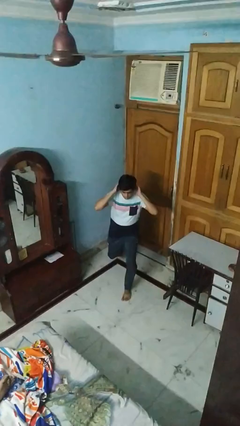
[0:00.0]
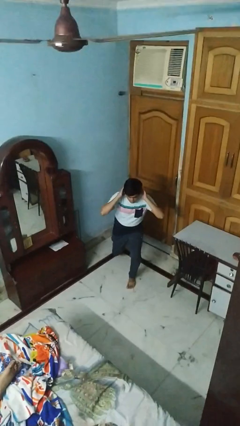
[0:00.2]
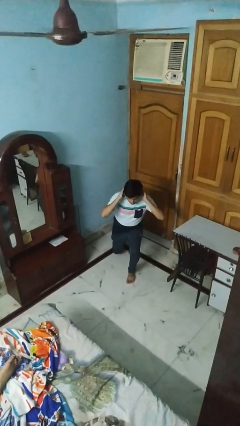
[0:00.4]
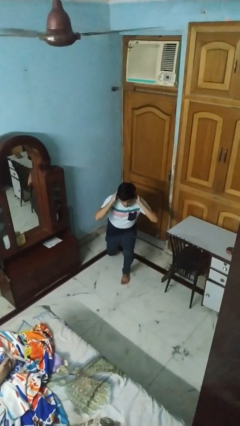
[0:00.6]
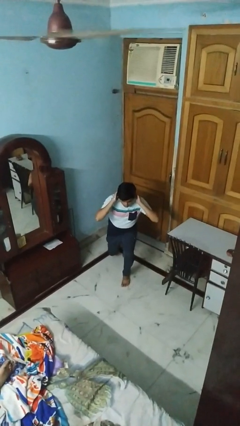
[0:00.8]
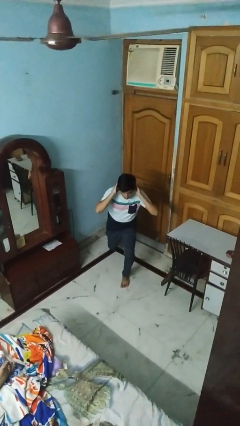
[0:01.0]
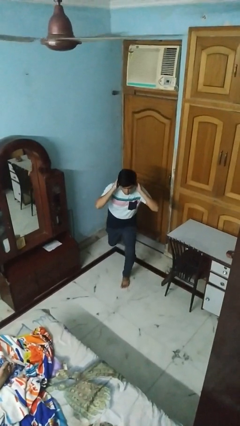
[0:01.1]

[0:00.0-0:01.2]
person exercises with lunges

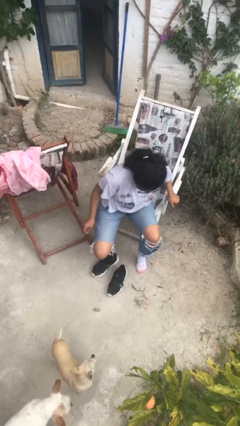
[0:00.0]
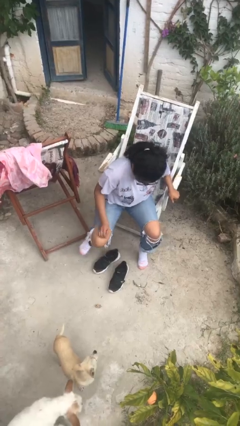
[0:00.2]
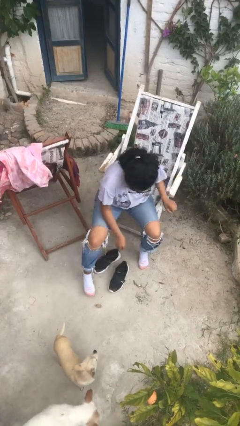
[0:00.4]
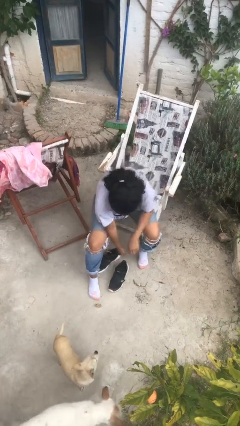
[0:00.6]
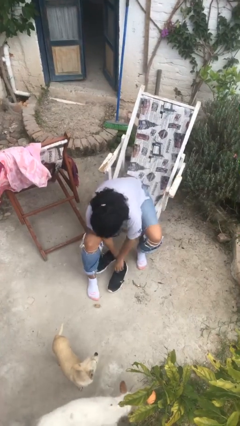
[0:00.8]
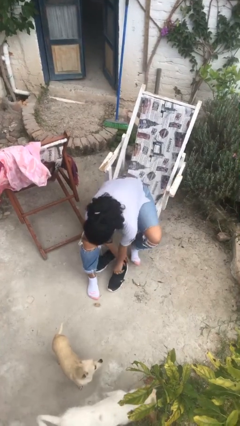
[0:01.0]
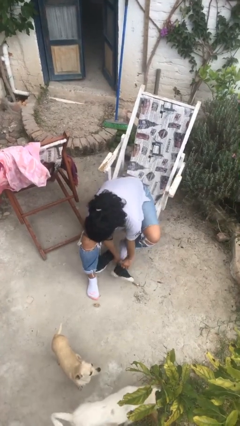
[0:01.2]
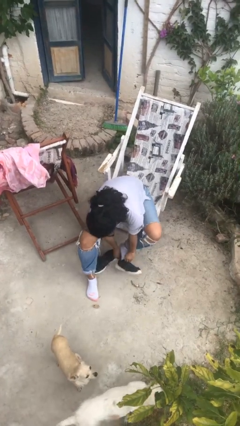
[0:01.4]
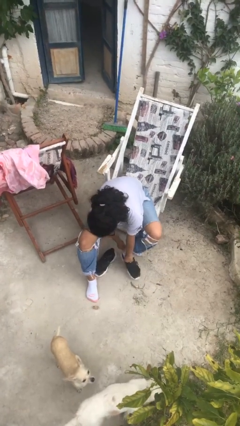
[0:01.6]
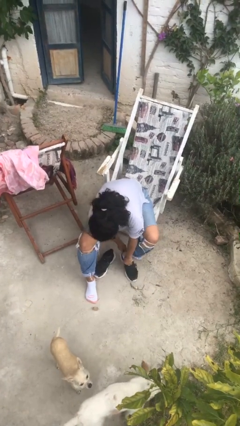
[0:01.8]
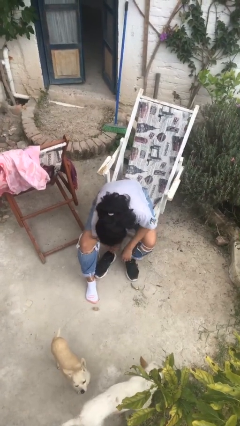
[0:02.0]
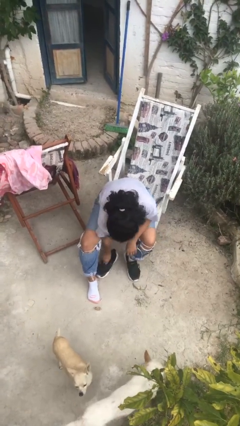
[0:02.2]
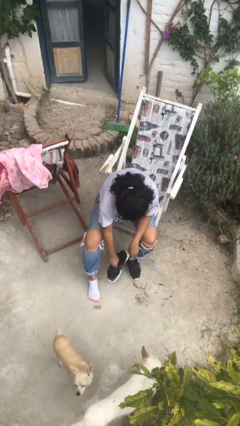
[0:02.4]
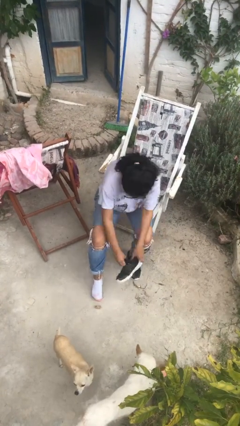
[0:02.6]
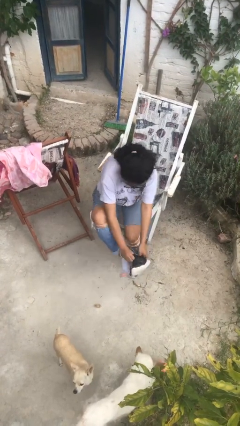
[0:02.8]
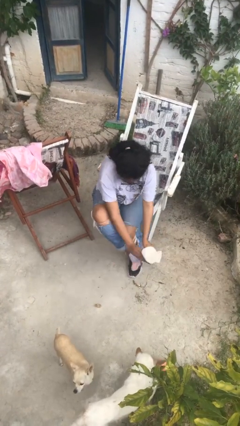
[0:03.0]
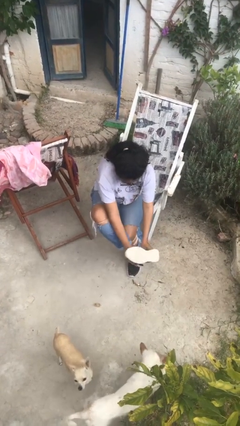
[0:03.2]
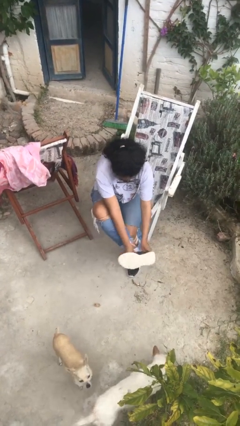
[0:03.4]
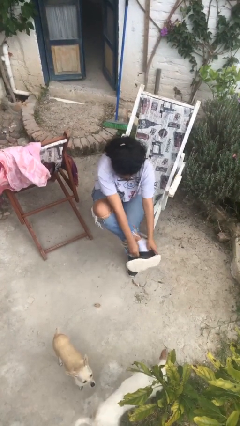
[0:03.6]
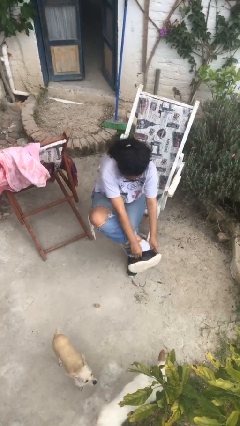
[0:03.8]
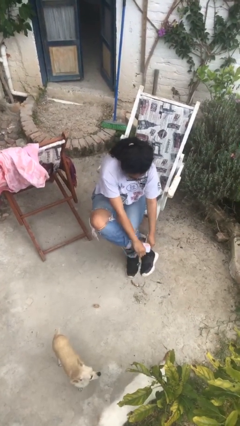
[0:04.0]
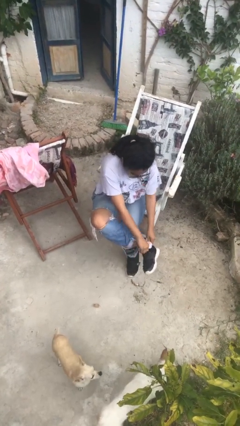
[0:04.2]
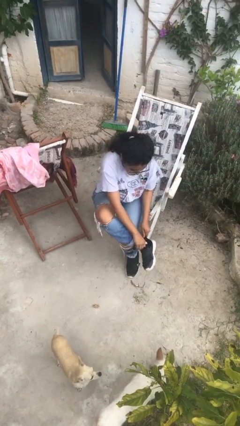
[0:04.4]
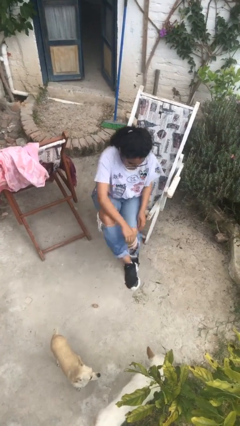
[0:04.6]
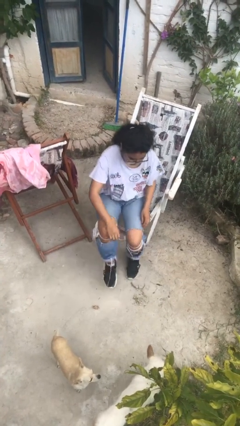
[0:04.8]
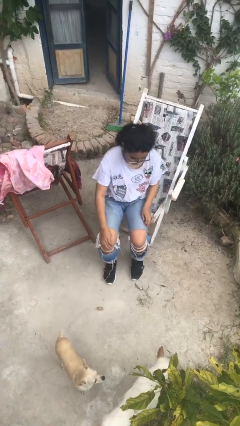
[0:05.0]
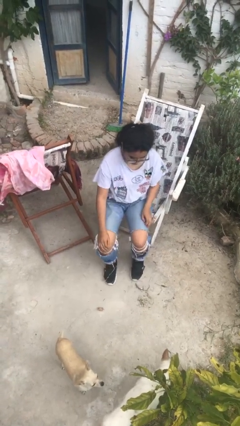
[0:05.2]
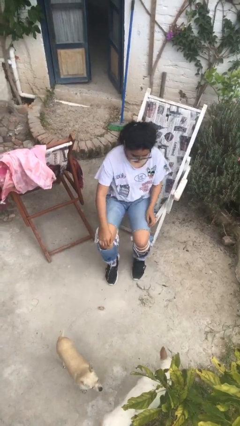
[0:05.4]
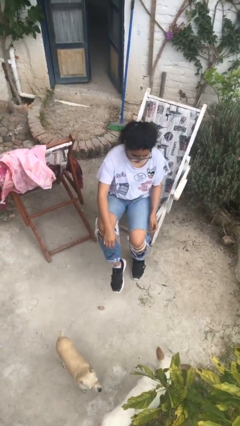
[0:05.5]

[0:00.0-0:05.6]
person puts on shoes

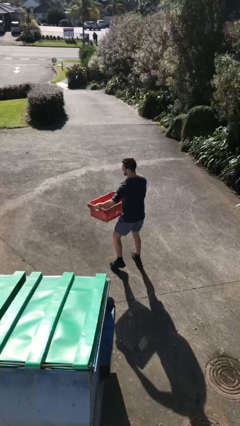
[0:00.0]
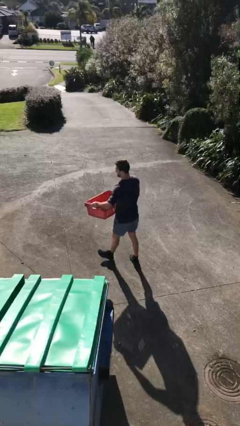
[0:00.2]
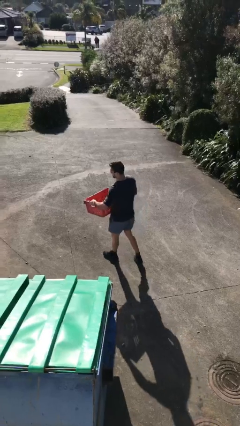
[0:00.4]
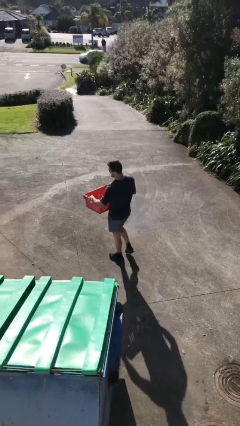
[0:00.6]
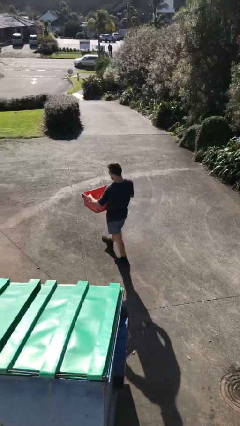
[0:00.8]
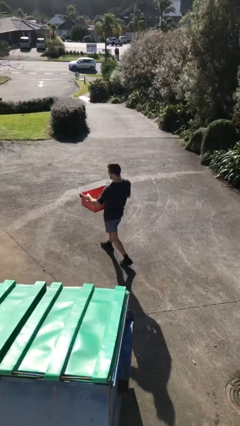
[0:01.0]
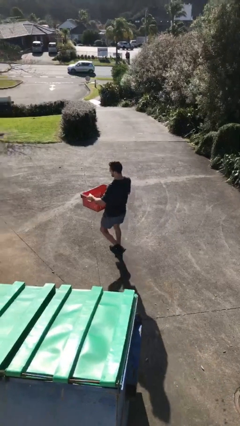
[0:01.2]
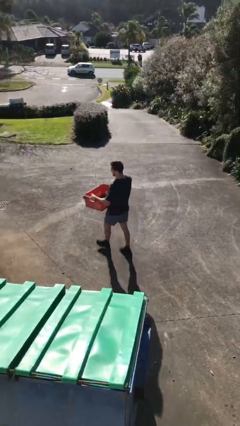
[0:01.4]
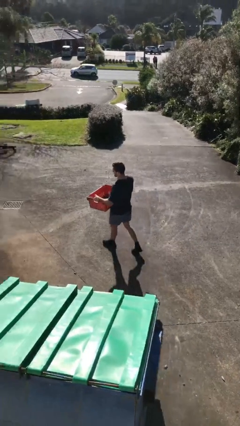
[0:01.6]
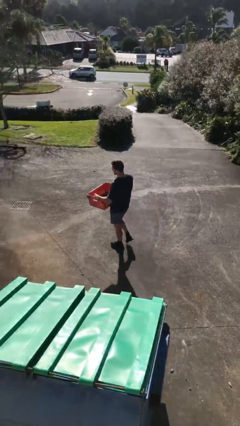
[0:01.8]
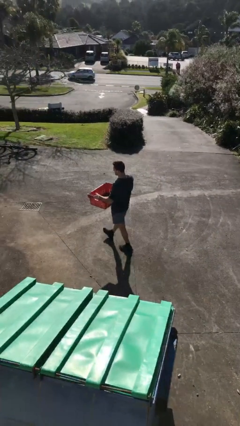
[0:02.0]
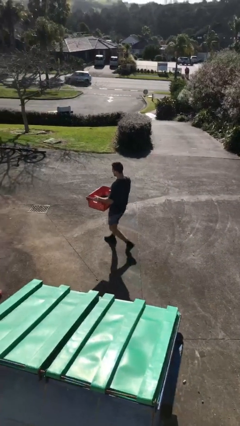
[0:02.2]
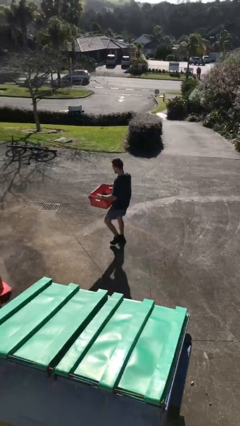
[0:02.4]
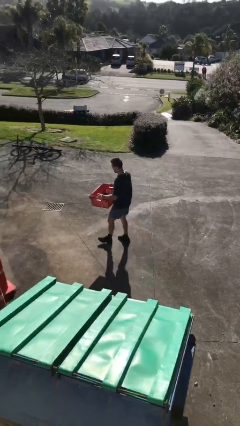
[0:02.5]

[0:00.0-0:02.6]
person carries heavy object

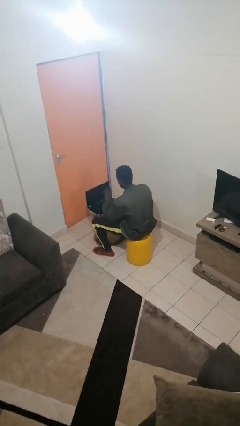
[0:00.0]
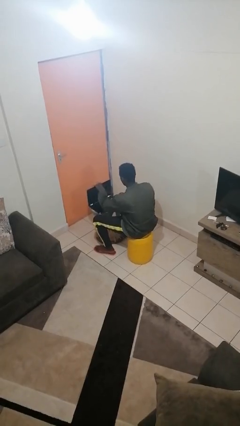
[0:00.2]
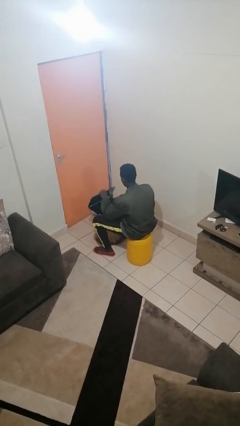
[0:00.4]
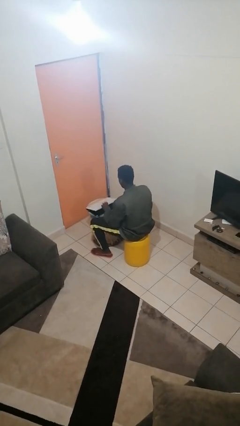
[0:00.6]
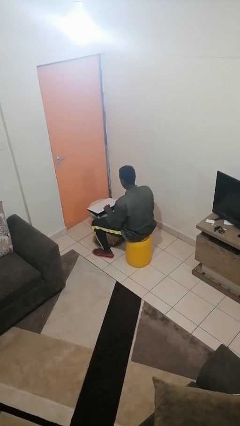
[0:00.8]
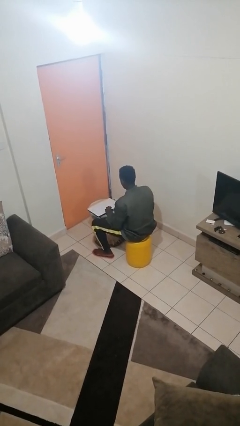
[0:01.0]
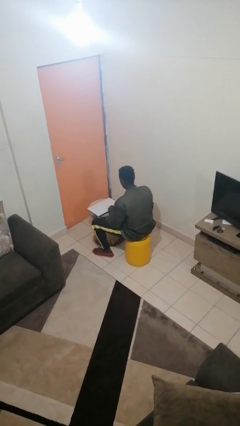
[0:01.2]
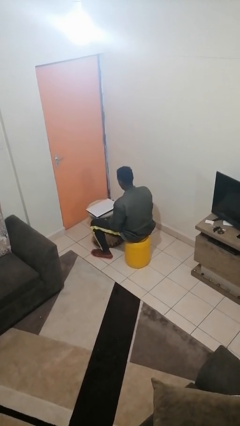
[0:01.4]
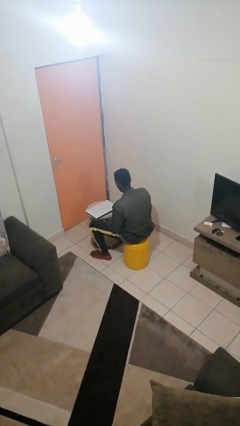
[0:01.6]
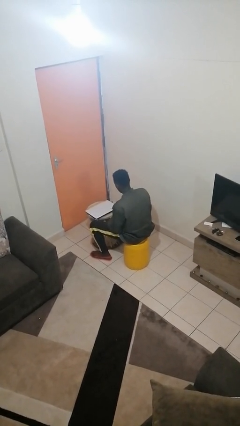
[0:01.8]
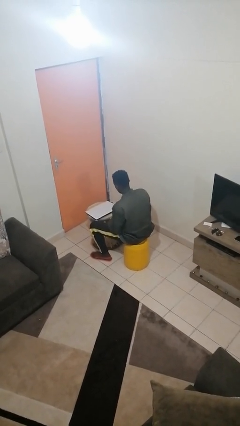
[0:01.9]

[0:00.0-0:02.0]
person closes laptop

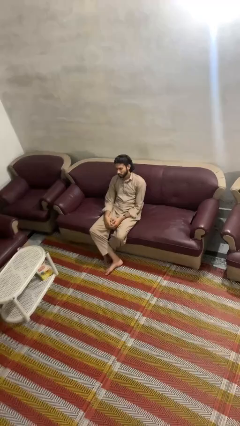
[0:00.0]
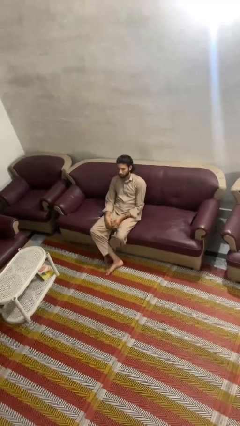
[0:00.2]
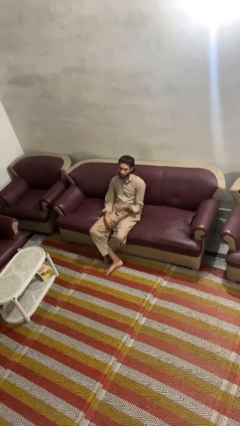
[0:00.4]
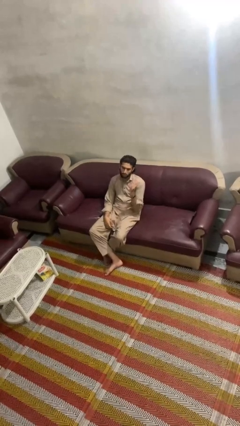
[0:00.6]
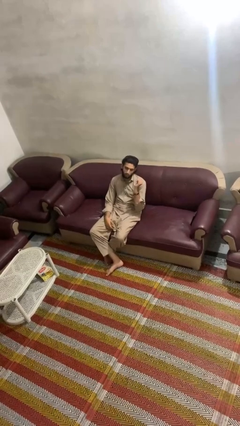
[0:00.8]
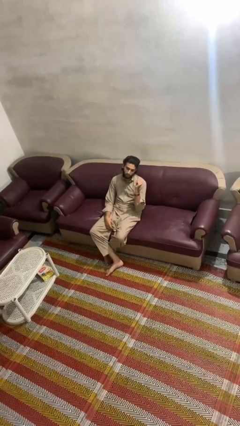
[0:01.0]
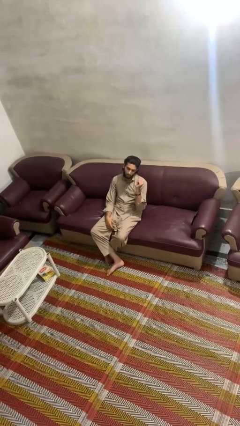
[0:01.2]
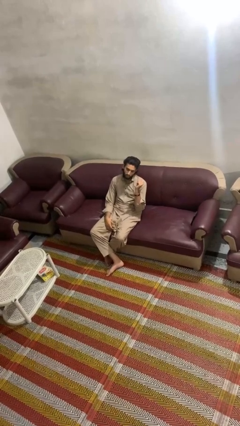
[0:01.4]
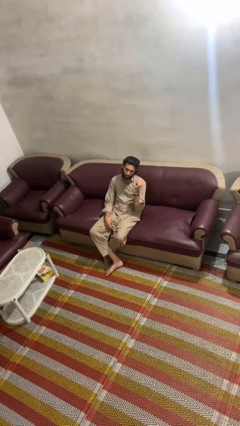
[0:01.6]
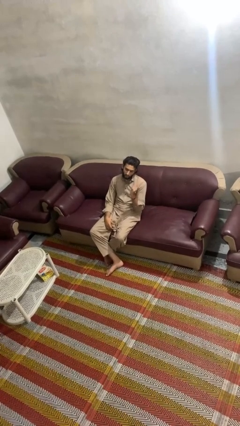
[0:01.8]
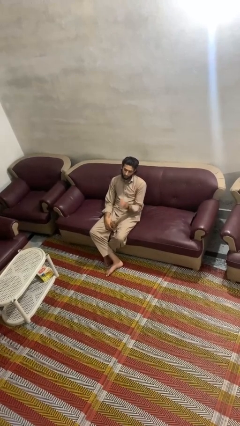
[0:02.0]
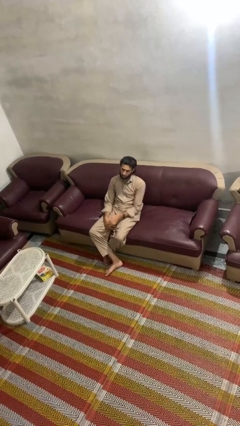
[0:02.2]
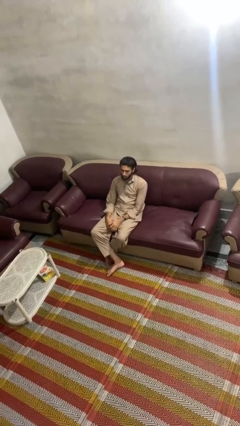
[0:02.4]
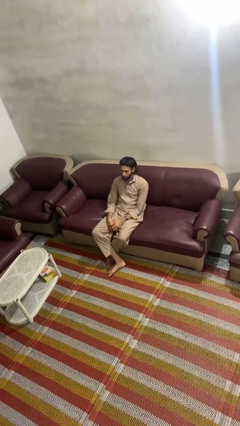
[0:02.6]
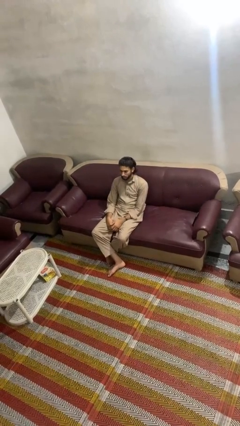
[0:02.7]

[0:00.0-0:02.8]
person gestures behind me

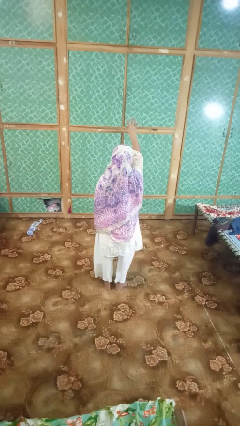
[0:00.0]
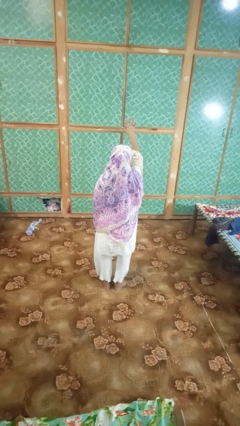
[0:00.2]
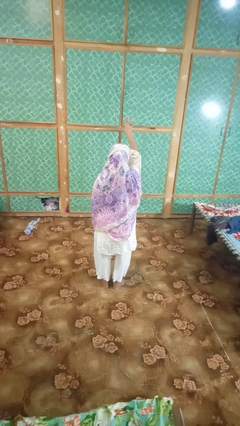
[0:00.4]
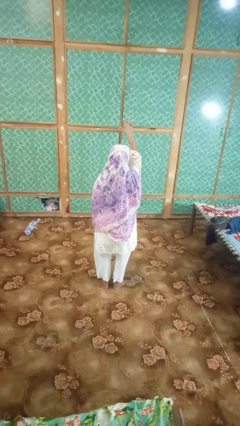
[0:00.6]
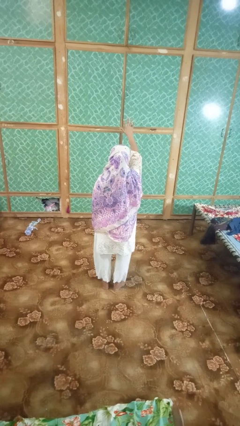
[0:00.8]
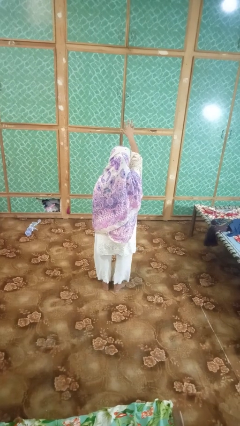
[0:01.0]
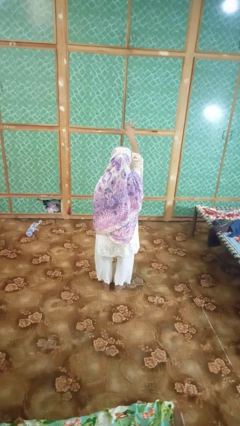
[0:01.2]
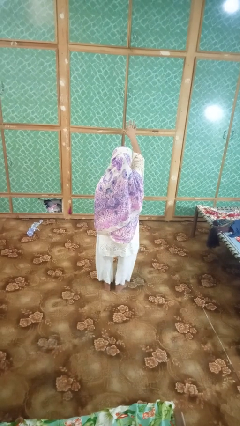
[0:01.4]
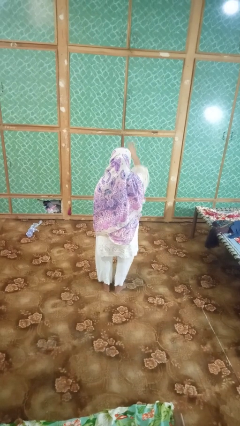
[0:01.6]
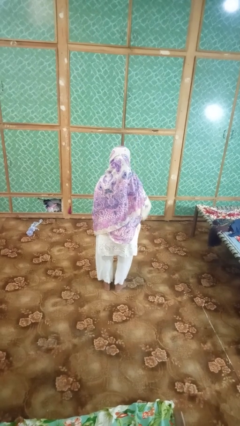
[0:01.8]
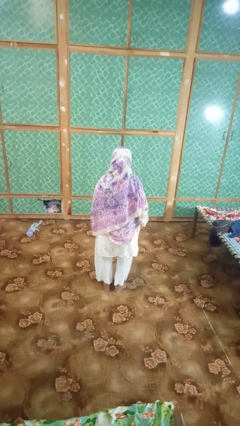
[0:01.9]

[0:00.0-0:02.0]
person gestures number five

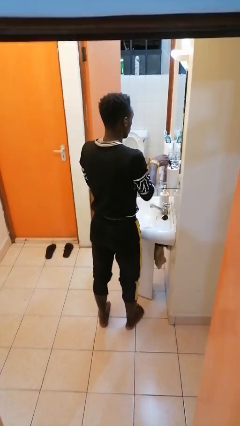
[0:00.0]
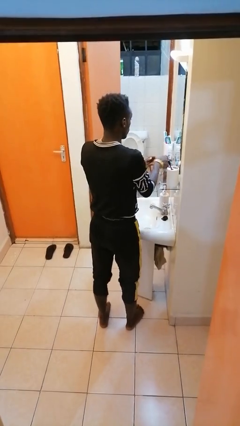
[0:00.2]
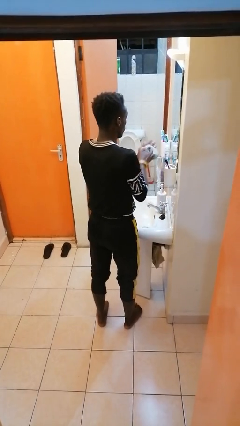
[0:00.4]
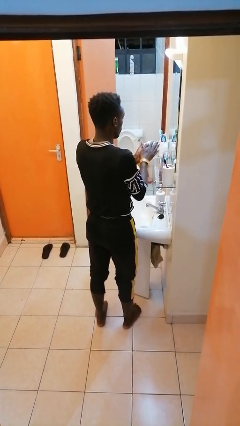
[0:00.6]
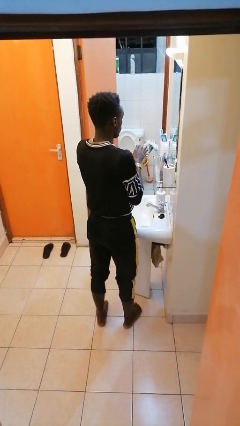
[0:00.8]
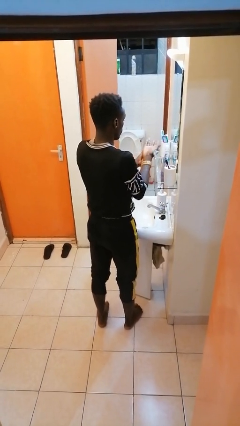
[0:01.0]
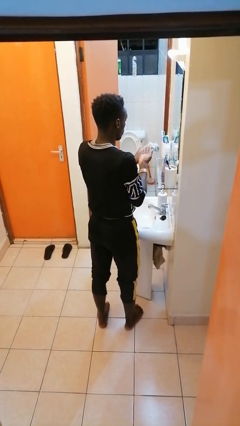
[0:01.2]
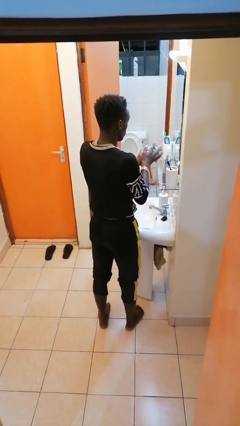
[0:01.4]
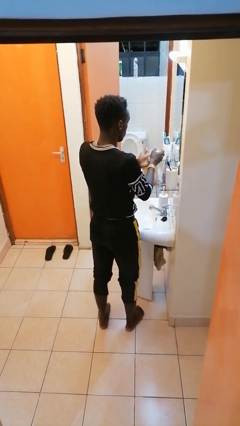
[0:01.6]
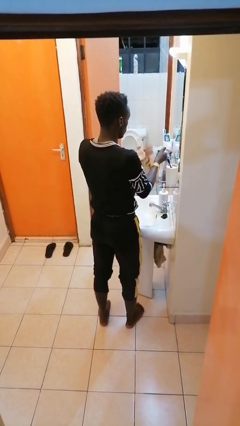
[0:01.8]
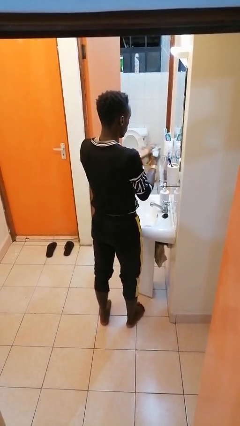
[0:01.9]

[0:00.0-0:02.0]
person dries hands with towel
